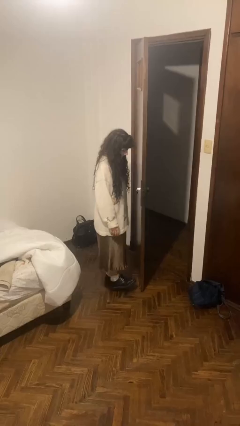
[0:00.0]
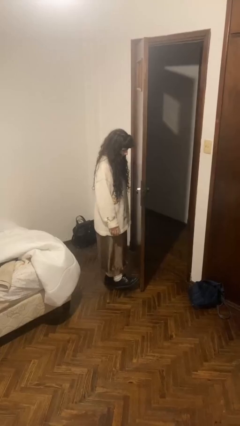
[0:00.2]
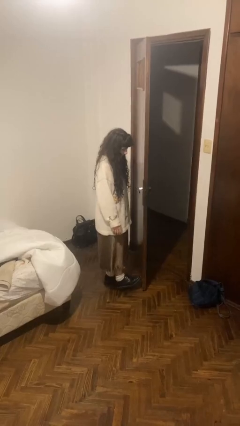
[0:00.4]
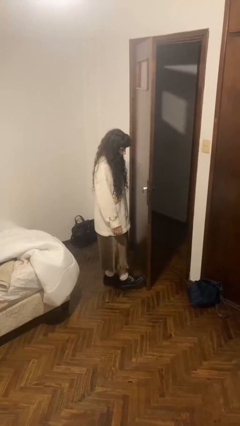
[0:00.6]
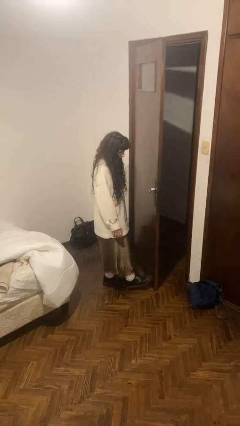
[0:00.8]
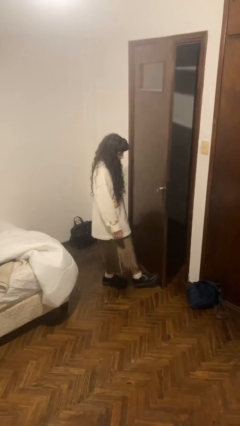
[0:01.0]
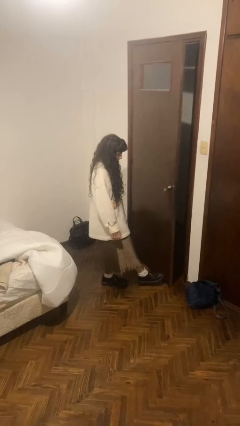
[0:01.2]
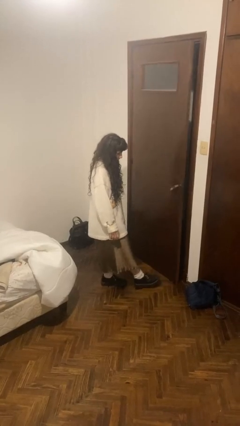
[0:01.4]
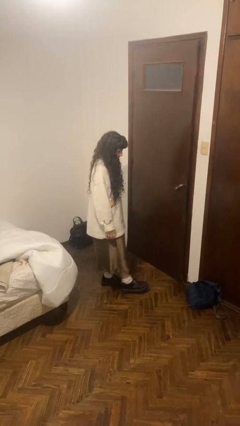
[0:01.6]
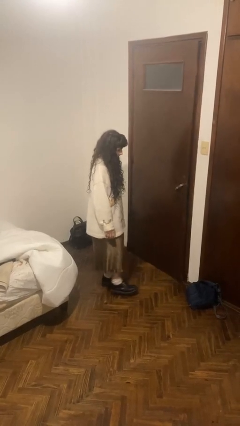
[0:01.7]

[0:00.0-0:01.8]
person closes door with foot

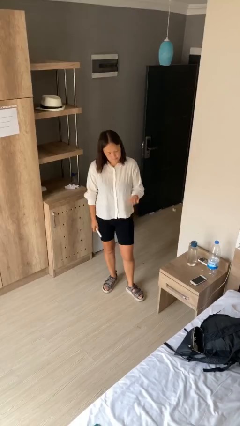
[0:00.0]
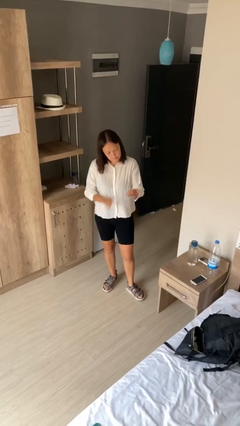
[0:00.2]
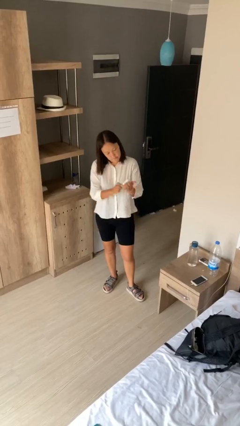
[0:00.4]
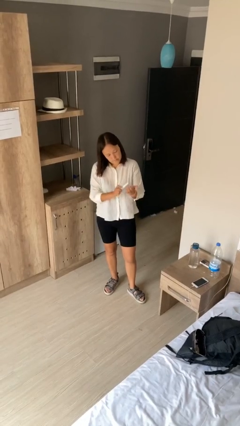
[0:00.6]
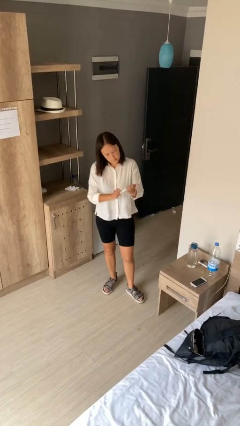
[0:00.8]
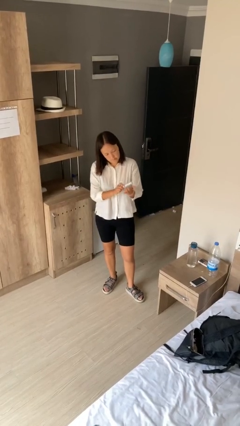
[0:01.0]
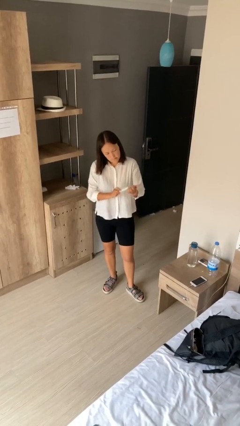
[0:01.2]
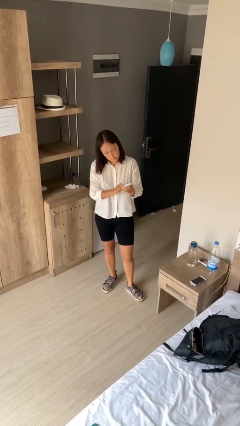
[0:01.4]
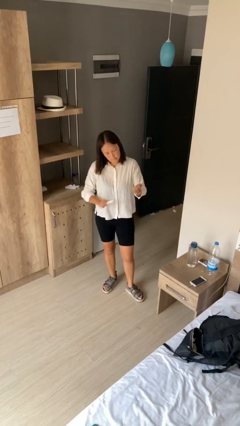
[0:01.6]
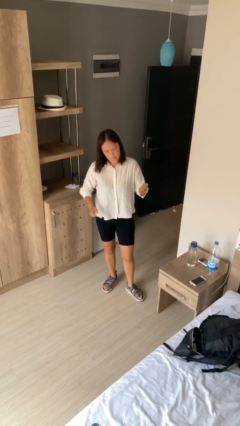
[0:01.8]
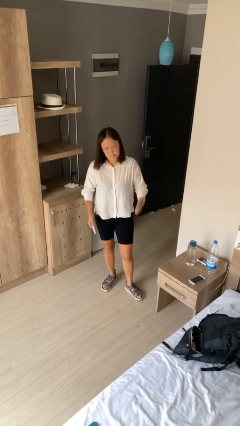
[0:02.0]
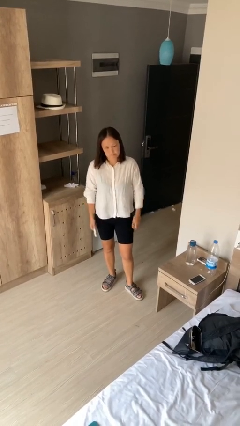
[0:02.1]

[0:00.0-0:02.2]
person files fingernails

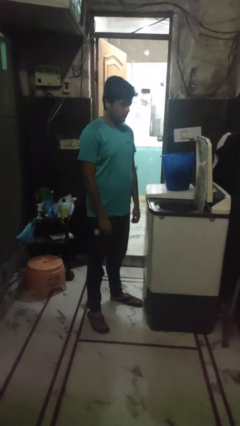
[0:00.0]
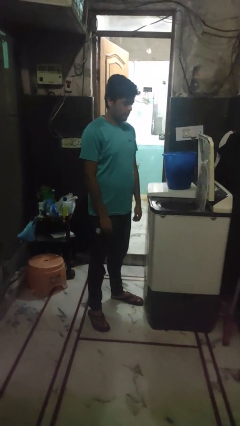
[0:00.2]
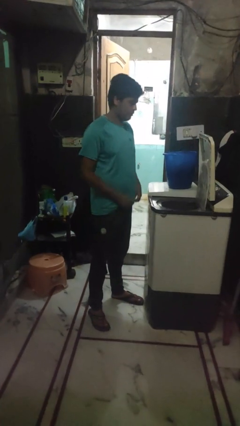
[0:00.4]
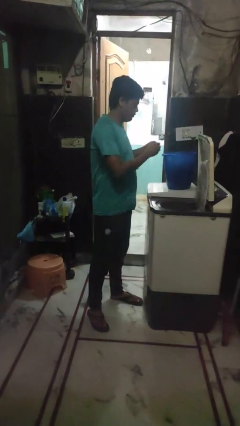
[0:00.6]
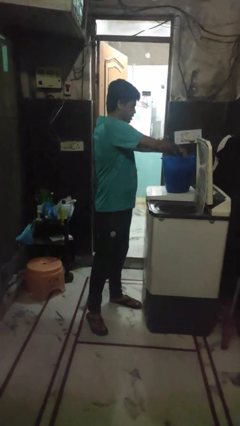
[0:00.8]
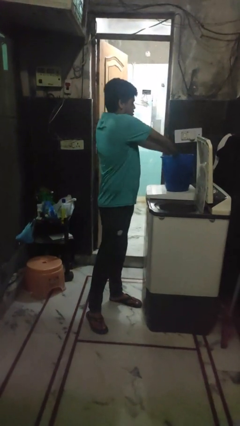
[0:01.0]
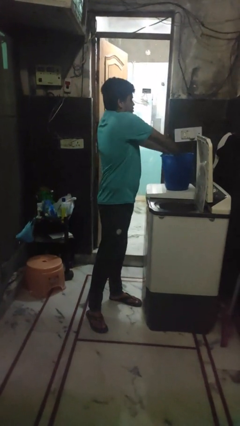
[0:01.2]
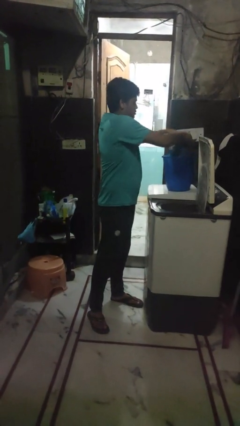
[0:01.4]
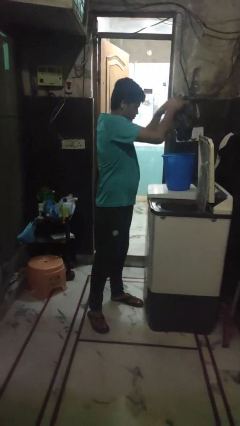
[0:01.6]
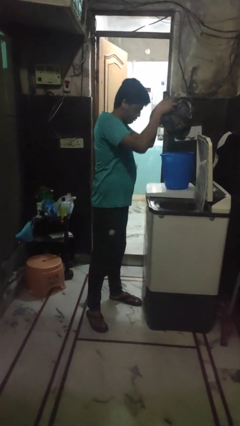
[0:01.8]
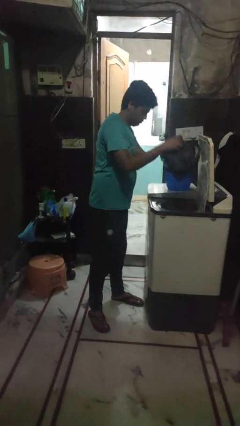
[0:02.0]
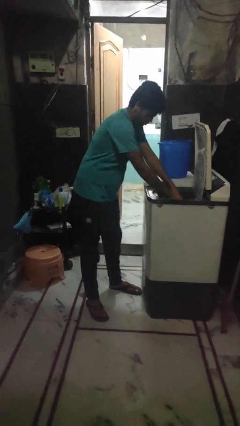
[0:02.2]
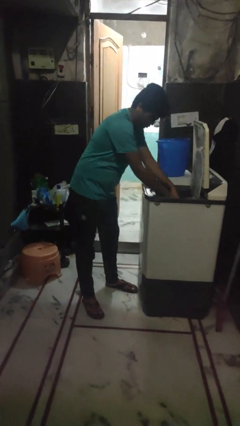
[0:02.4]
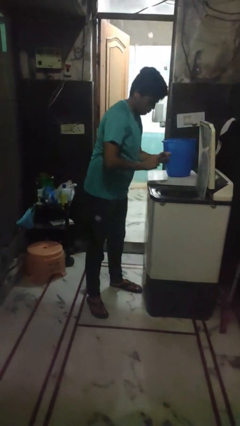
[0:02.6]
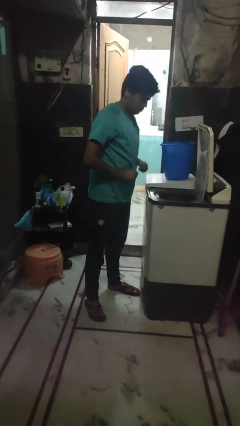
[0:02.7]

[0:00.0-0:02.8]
person loads clotheswasher

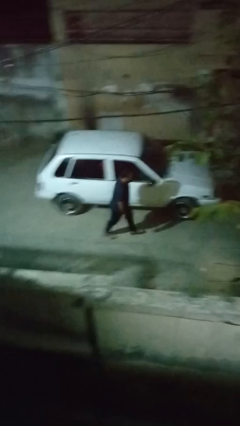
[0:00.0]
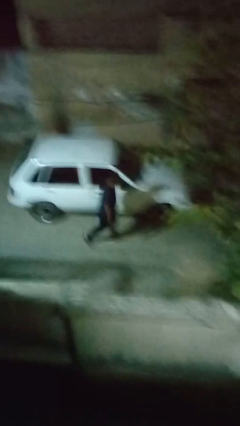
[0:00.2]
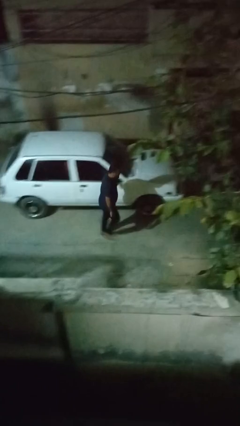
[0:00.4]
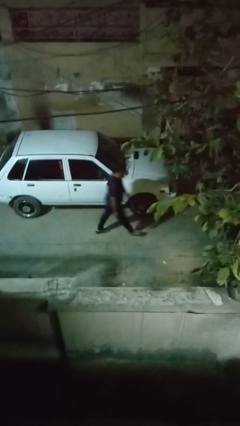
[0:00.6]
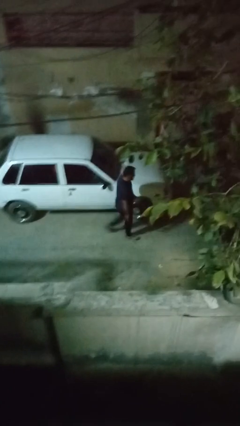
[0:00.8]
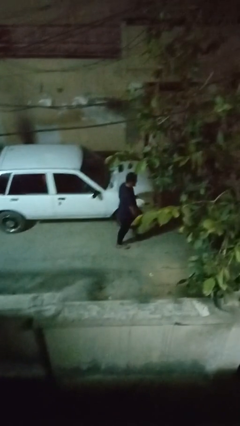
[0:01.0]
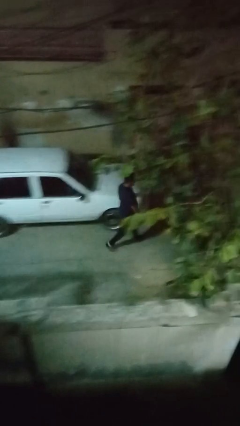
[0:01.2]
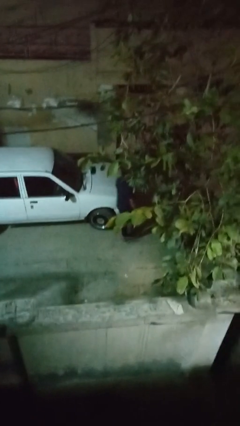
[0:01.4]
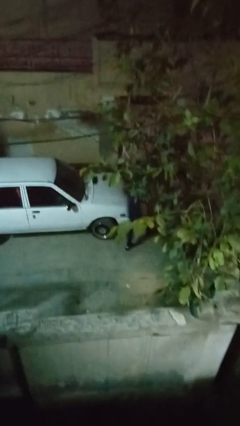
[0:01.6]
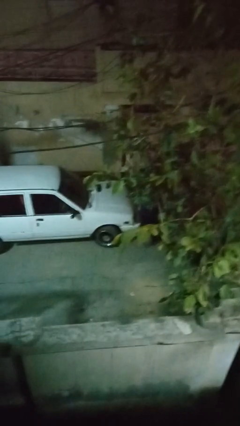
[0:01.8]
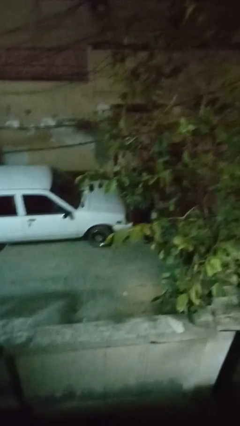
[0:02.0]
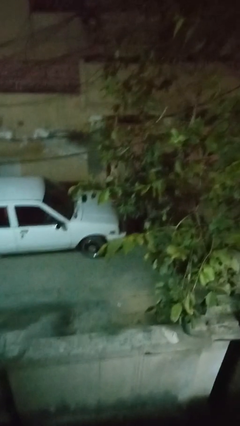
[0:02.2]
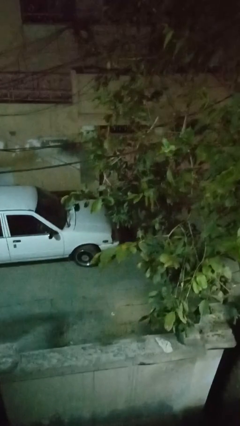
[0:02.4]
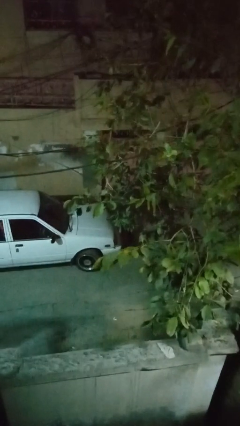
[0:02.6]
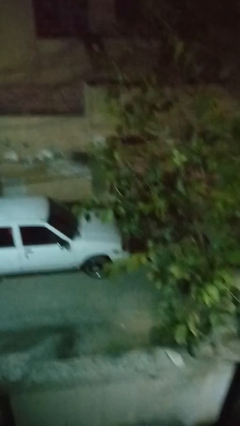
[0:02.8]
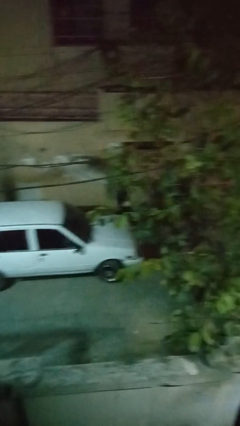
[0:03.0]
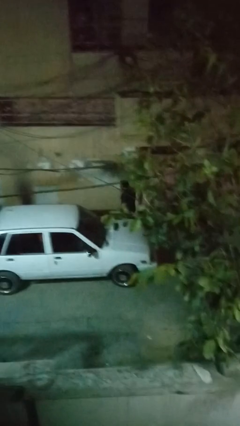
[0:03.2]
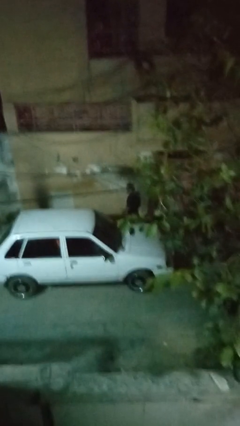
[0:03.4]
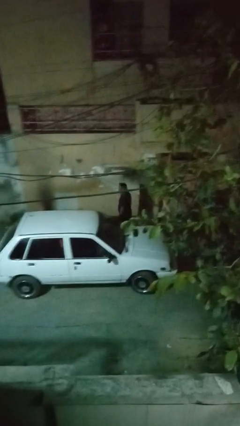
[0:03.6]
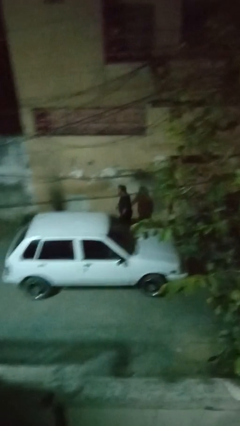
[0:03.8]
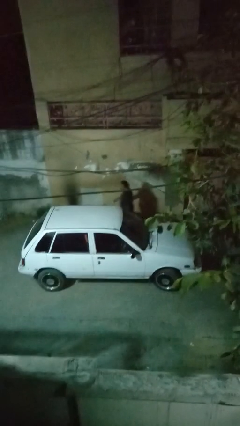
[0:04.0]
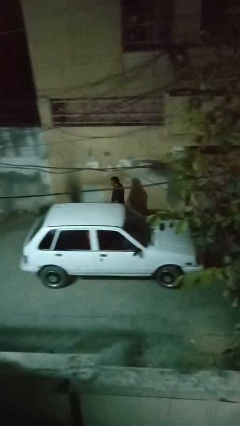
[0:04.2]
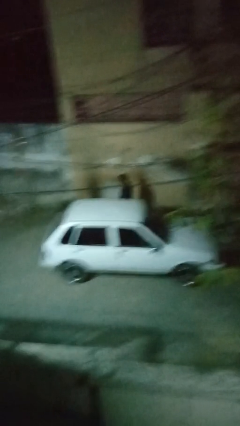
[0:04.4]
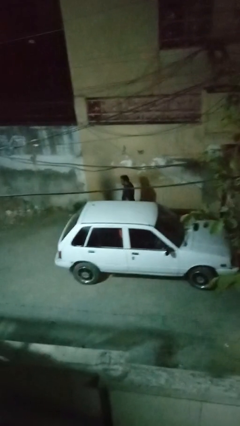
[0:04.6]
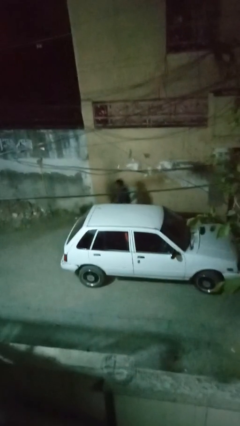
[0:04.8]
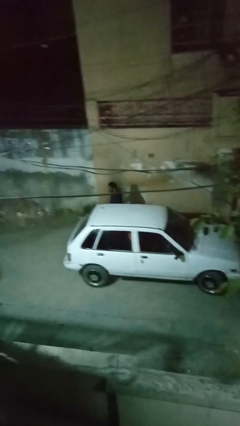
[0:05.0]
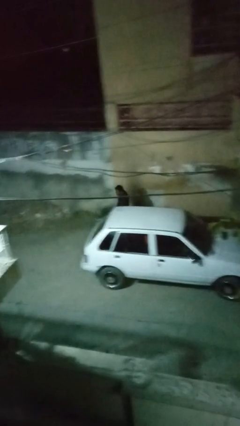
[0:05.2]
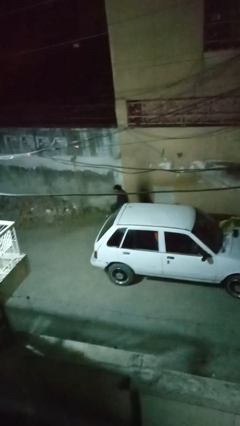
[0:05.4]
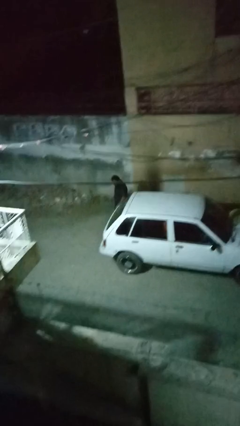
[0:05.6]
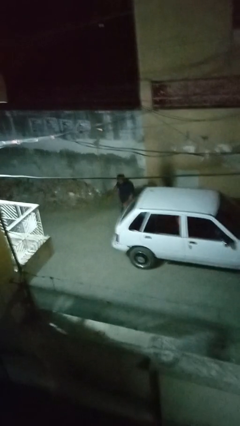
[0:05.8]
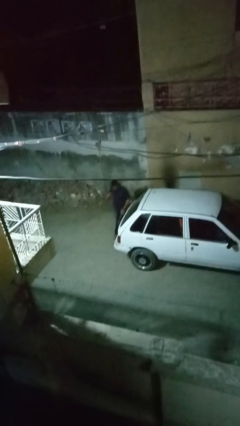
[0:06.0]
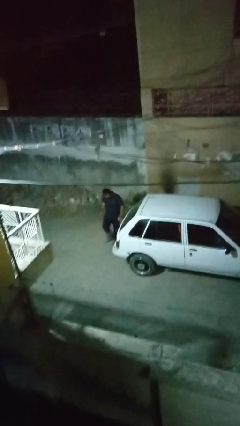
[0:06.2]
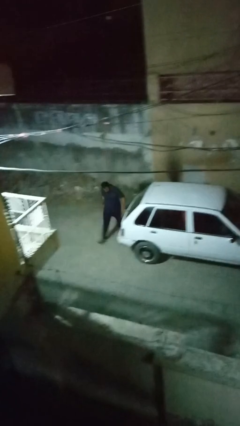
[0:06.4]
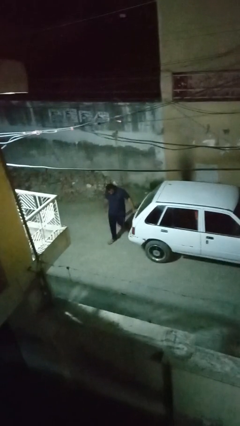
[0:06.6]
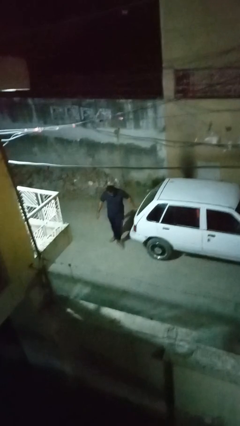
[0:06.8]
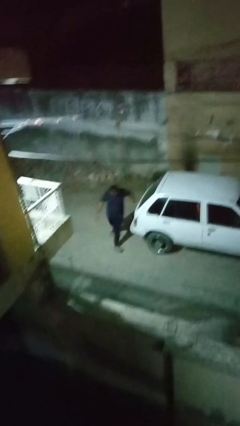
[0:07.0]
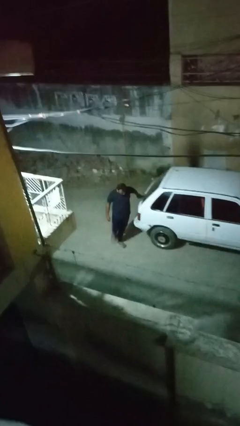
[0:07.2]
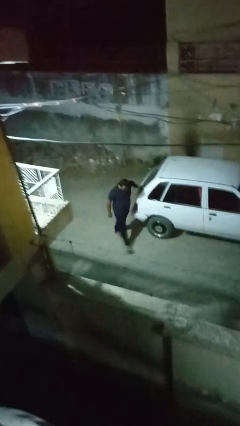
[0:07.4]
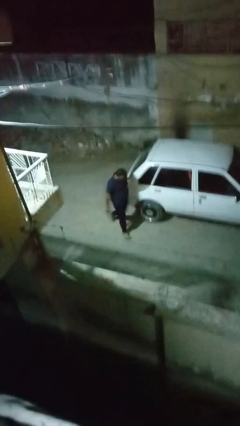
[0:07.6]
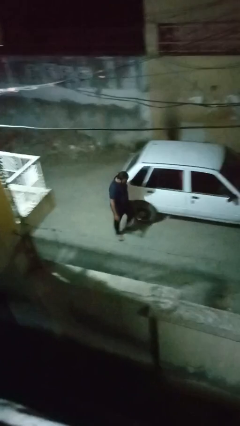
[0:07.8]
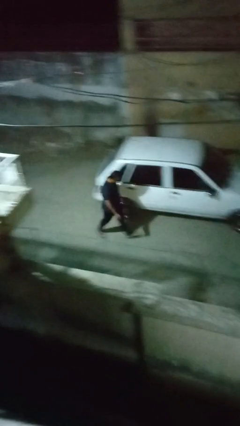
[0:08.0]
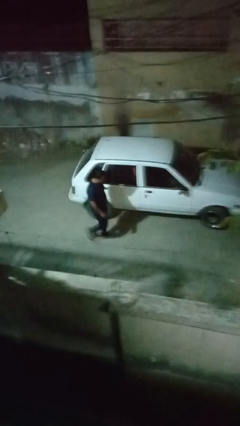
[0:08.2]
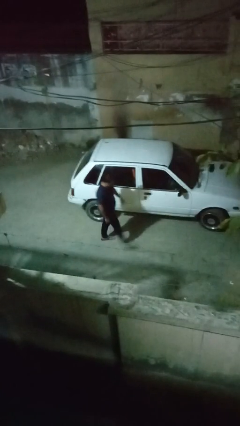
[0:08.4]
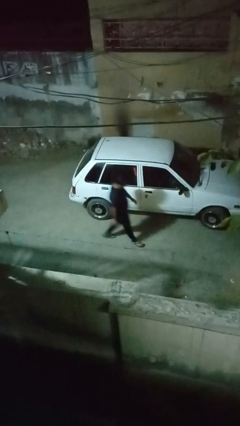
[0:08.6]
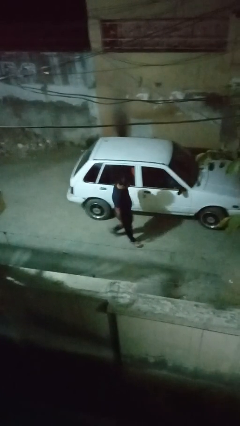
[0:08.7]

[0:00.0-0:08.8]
person walks around car

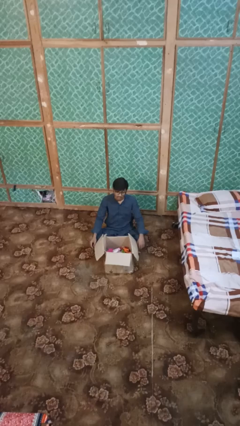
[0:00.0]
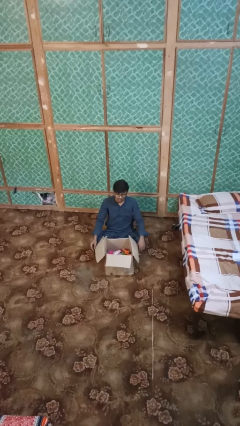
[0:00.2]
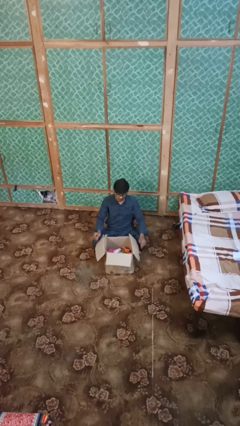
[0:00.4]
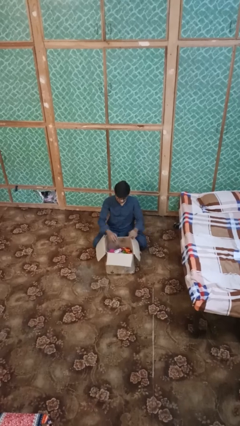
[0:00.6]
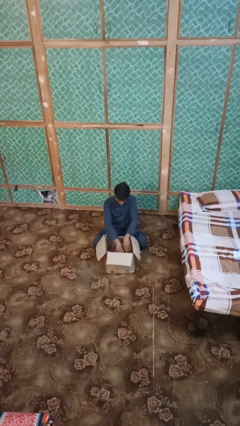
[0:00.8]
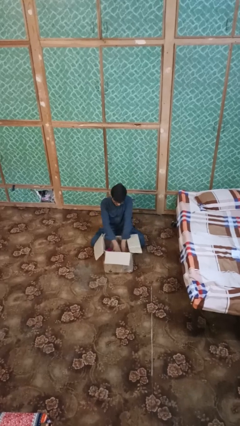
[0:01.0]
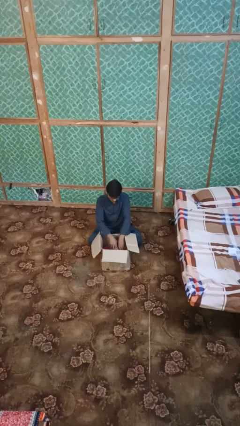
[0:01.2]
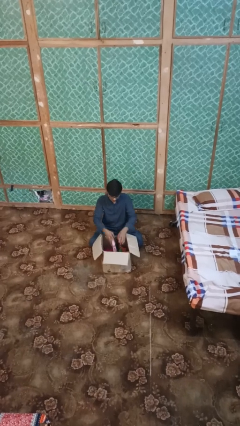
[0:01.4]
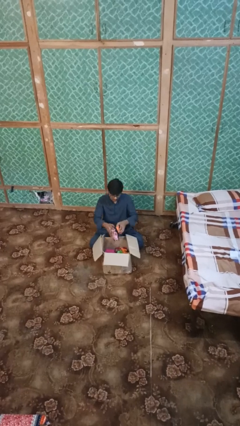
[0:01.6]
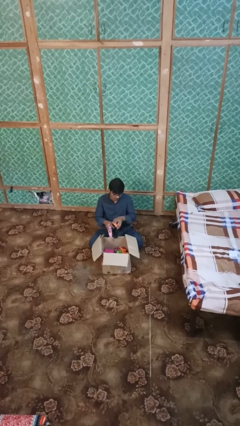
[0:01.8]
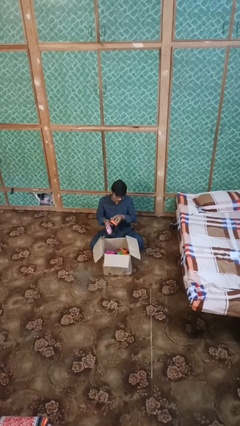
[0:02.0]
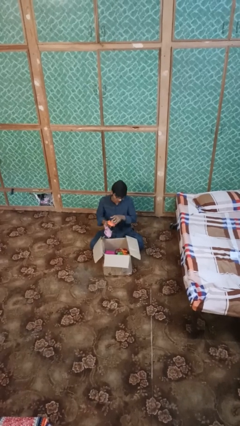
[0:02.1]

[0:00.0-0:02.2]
person takes object from box
